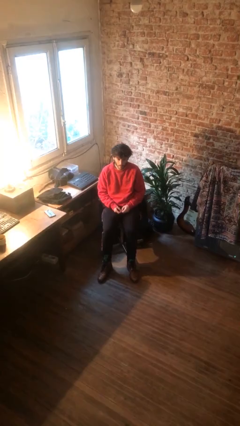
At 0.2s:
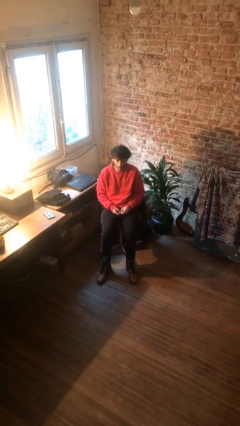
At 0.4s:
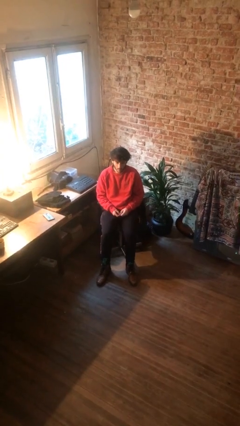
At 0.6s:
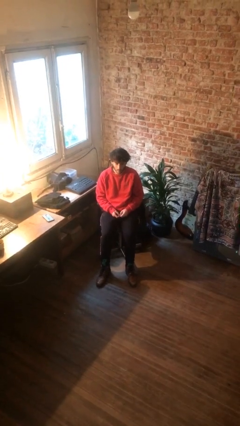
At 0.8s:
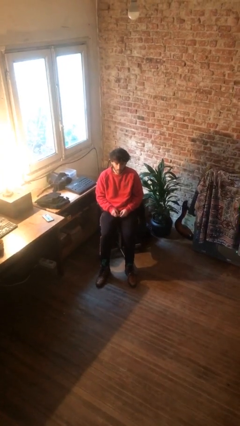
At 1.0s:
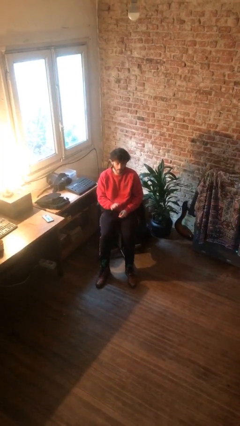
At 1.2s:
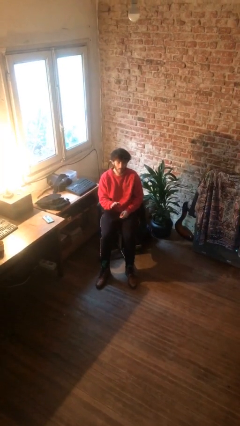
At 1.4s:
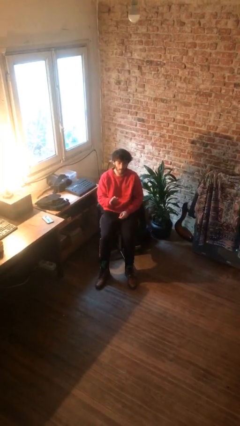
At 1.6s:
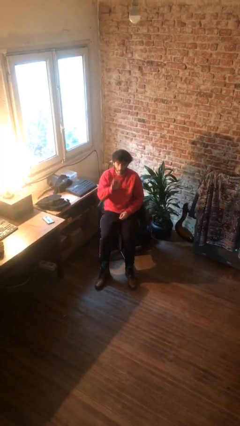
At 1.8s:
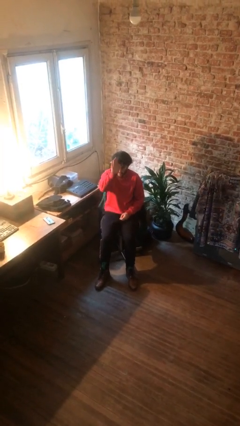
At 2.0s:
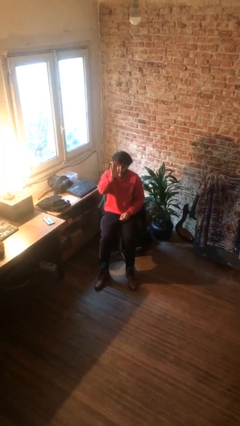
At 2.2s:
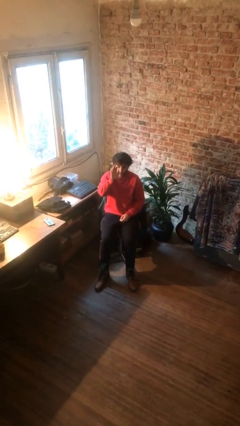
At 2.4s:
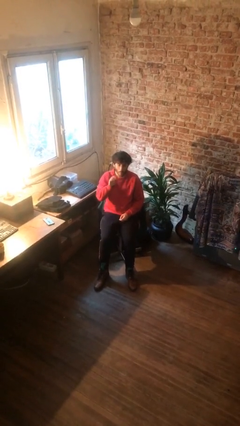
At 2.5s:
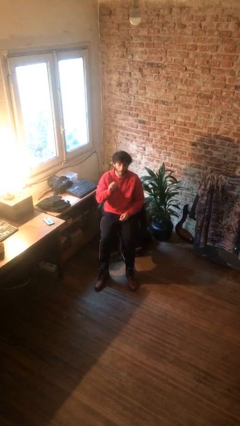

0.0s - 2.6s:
person gestures swipe up

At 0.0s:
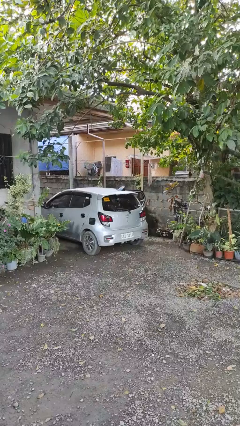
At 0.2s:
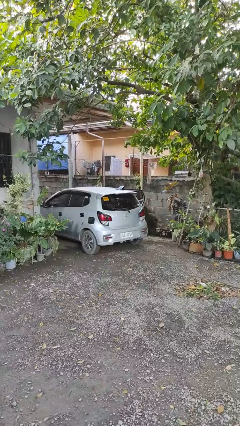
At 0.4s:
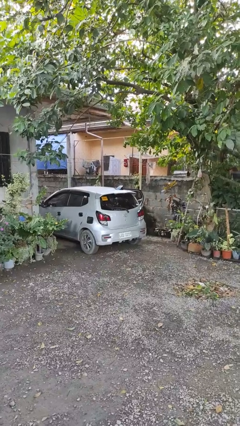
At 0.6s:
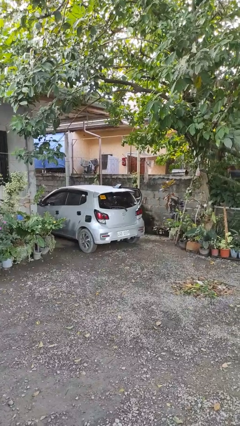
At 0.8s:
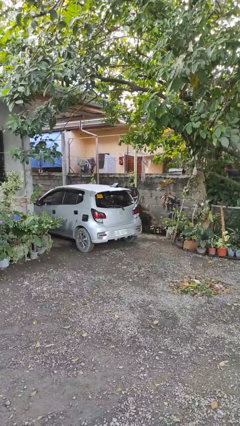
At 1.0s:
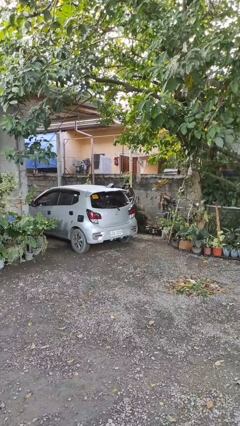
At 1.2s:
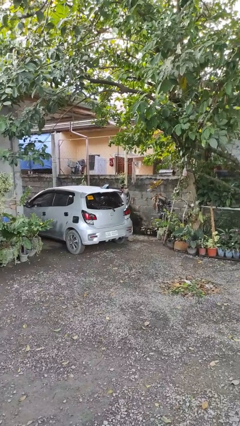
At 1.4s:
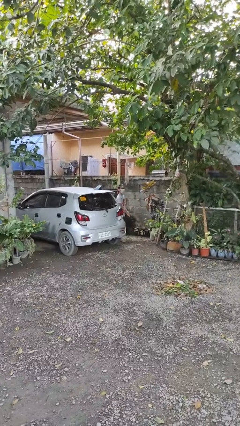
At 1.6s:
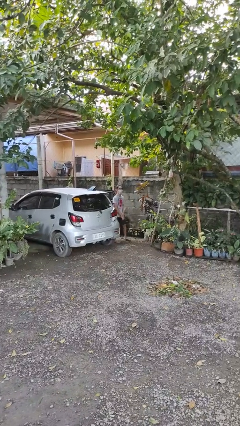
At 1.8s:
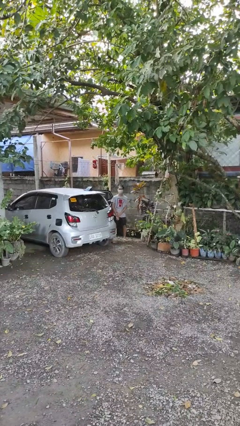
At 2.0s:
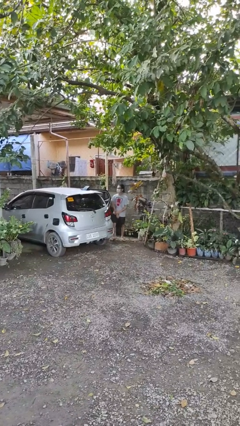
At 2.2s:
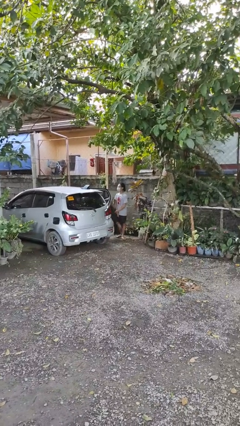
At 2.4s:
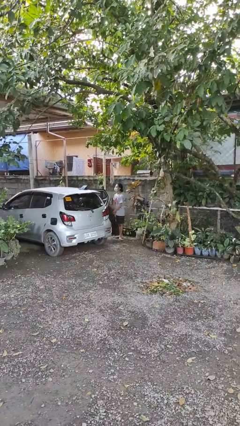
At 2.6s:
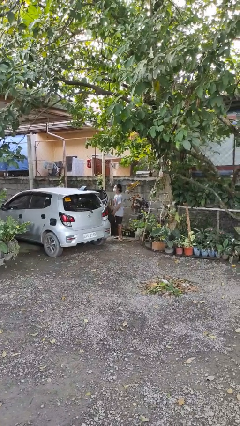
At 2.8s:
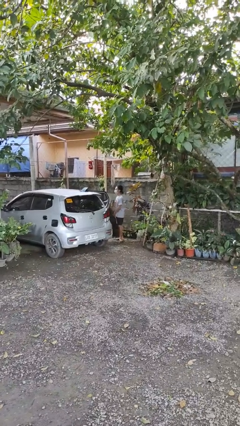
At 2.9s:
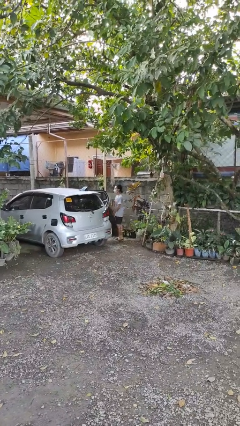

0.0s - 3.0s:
person exits car

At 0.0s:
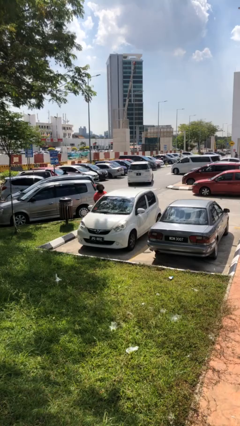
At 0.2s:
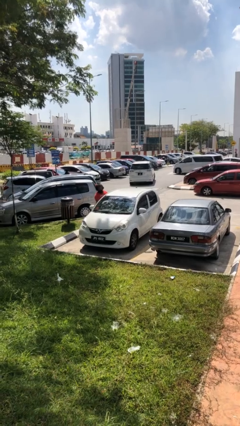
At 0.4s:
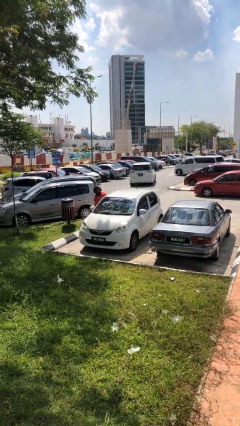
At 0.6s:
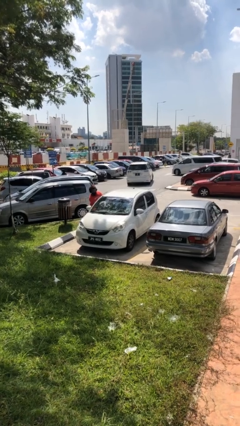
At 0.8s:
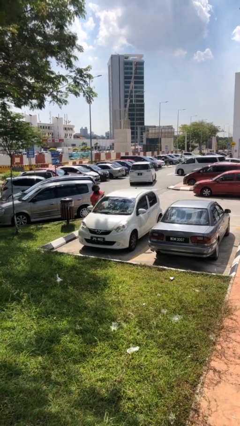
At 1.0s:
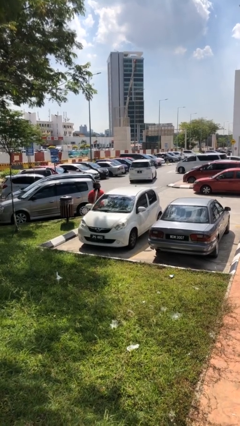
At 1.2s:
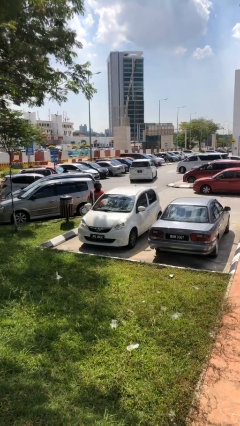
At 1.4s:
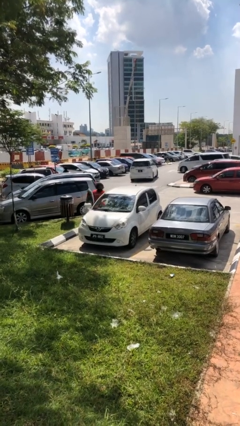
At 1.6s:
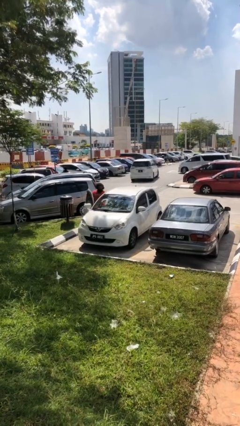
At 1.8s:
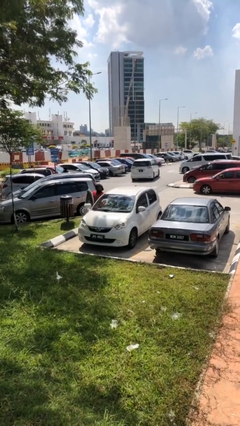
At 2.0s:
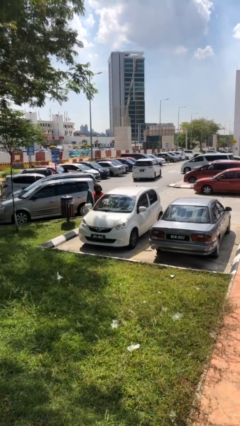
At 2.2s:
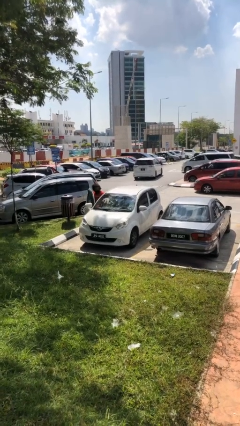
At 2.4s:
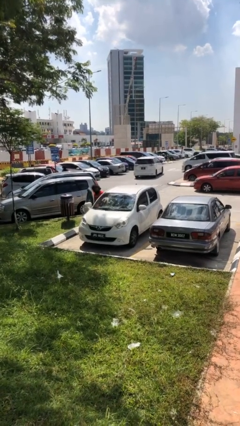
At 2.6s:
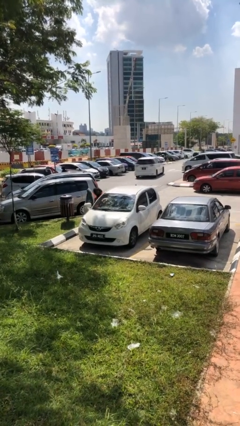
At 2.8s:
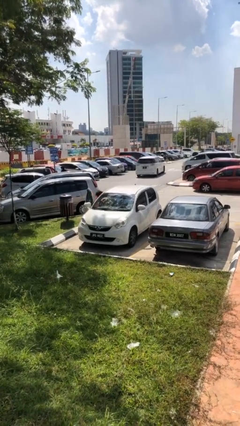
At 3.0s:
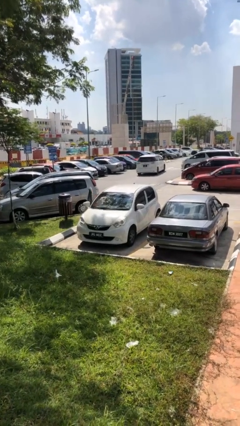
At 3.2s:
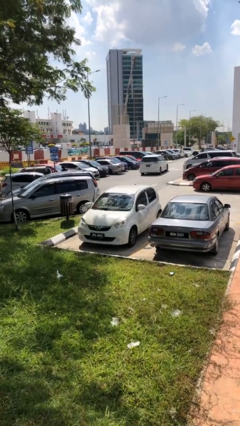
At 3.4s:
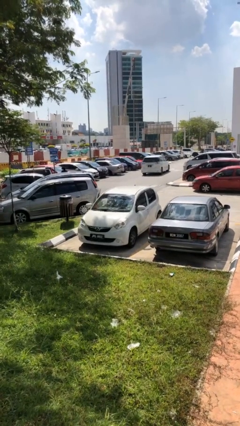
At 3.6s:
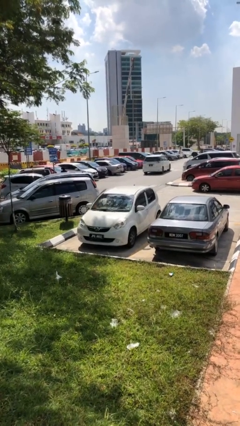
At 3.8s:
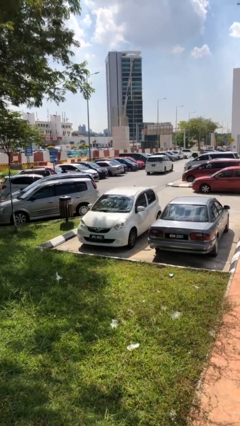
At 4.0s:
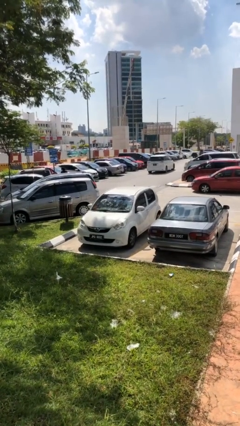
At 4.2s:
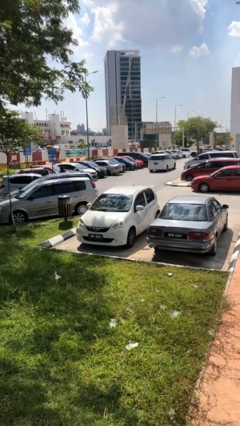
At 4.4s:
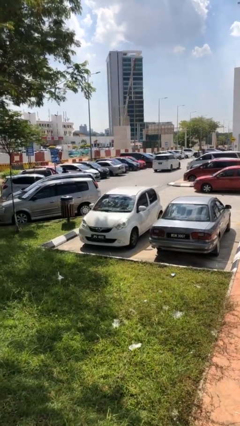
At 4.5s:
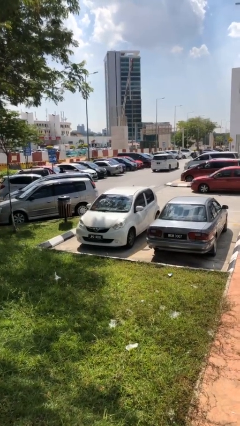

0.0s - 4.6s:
car picks up person

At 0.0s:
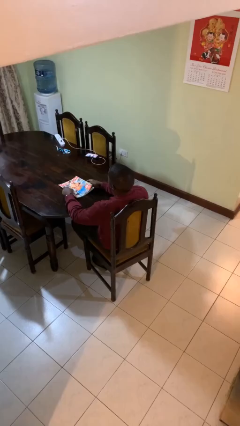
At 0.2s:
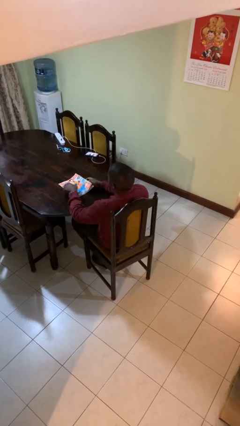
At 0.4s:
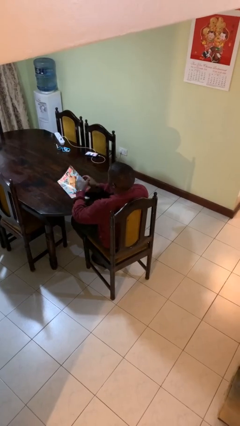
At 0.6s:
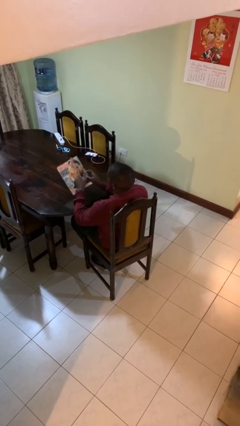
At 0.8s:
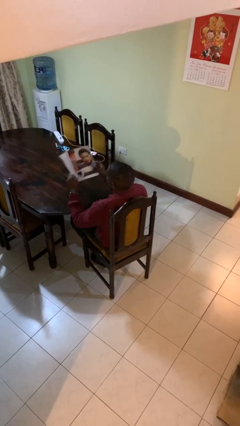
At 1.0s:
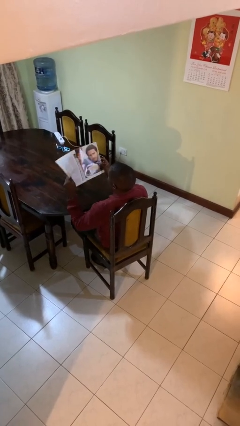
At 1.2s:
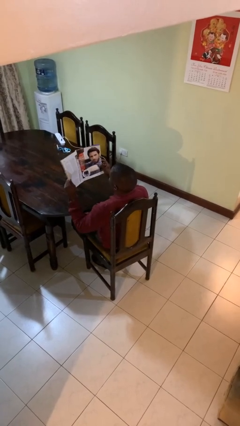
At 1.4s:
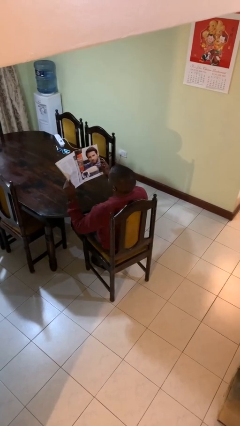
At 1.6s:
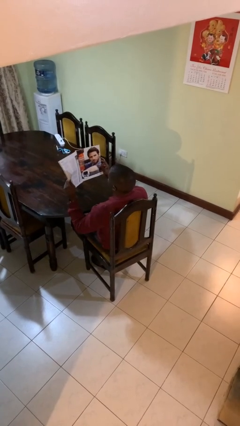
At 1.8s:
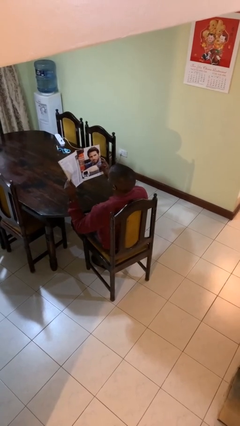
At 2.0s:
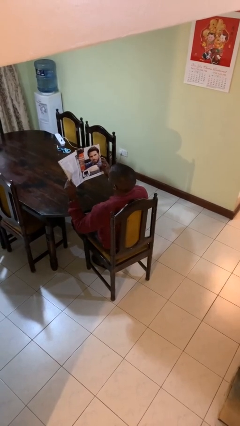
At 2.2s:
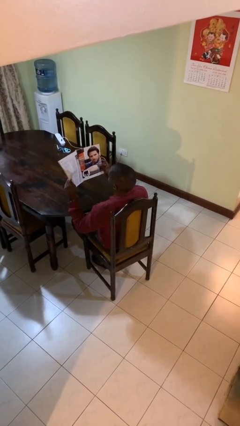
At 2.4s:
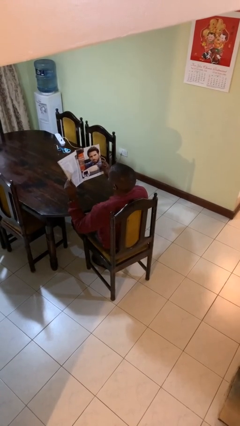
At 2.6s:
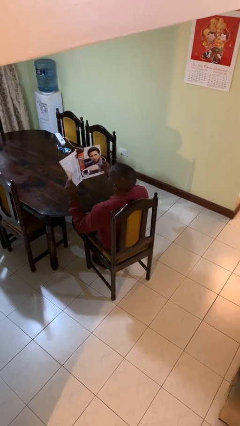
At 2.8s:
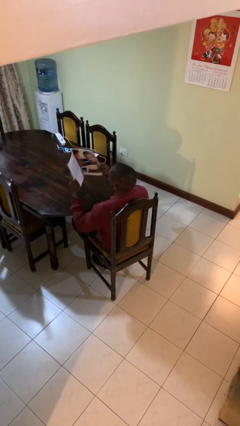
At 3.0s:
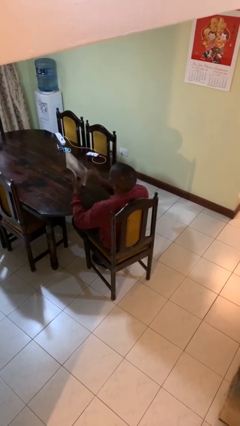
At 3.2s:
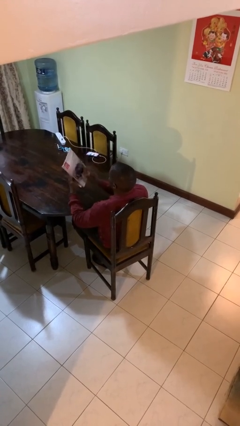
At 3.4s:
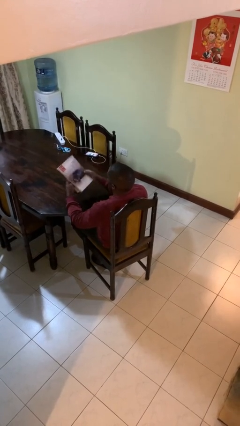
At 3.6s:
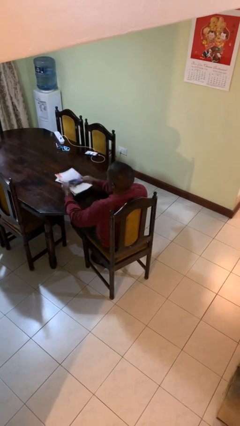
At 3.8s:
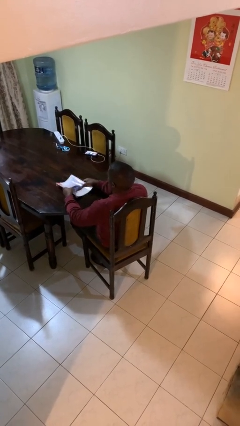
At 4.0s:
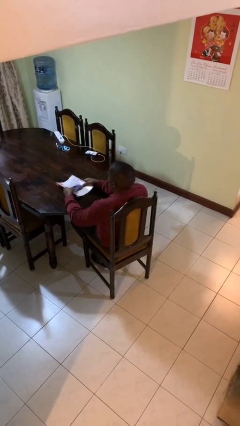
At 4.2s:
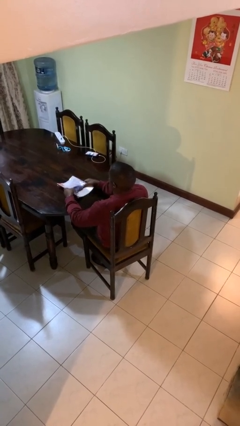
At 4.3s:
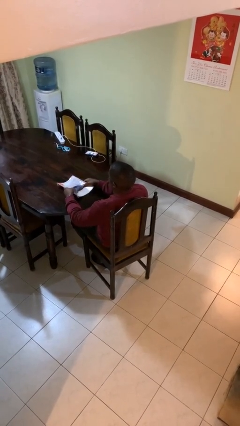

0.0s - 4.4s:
person reads magazine

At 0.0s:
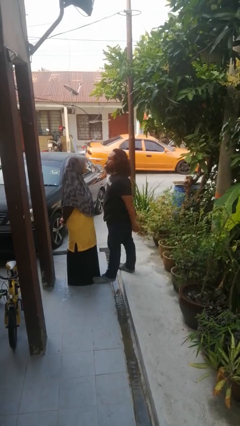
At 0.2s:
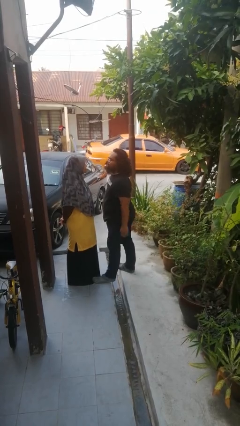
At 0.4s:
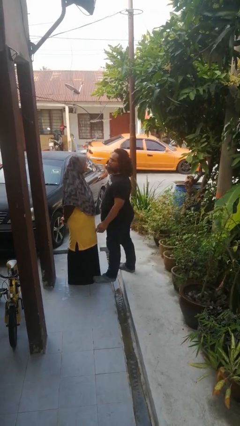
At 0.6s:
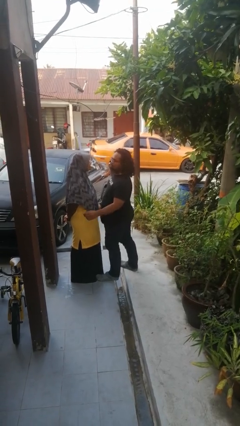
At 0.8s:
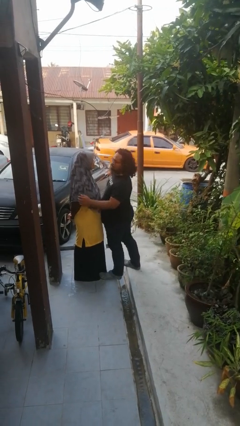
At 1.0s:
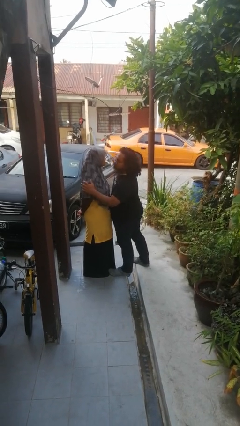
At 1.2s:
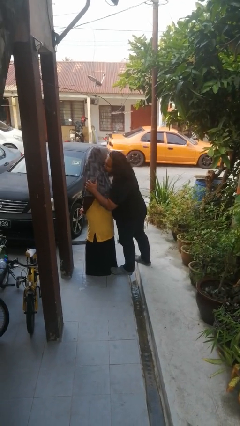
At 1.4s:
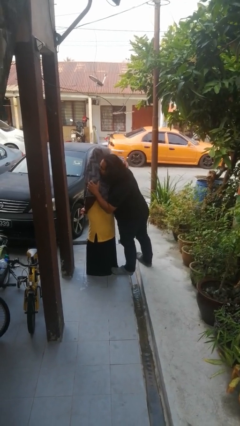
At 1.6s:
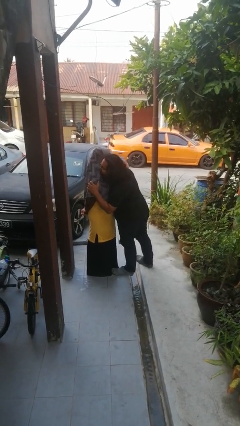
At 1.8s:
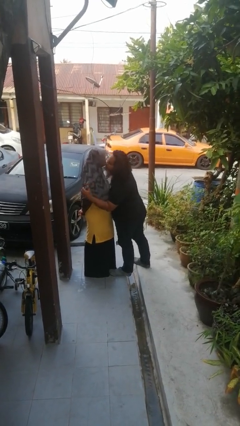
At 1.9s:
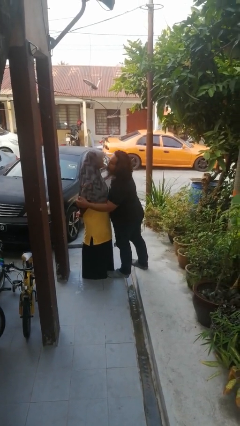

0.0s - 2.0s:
person kisses cheek of person

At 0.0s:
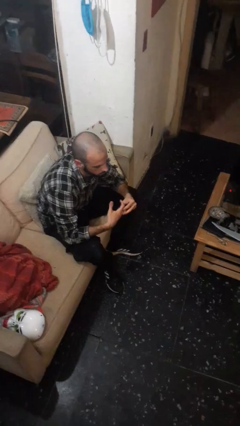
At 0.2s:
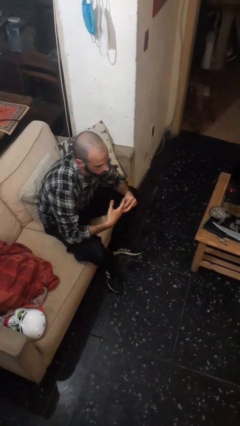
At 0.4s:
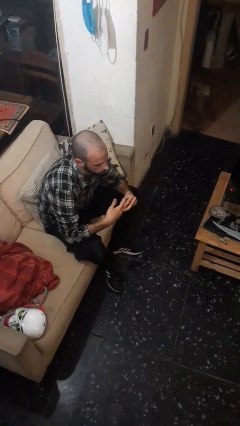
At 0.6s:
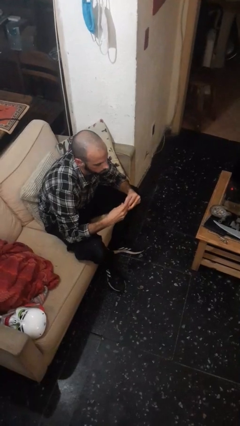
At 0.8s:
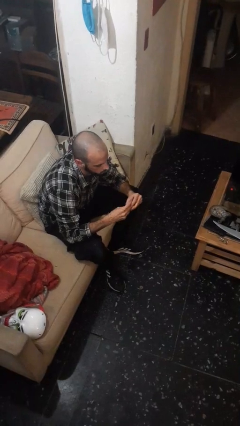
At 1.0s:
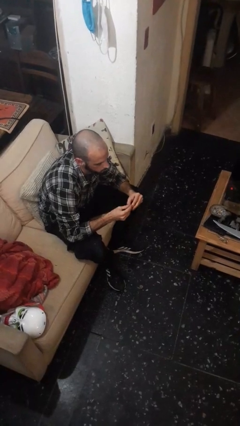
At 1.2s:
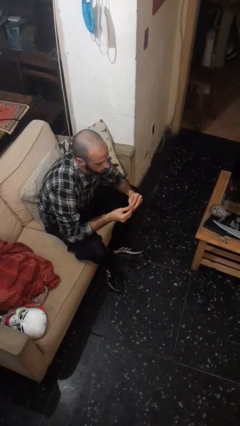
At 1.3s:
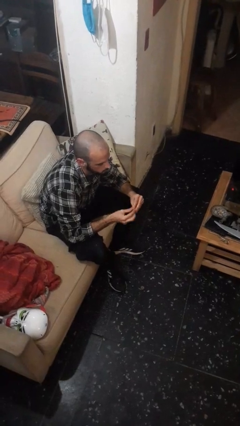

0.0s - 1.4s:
person takes off ring
